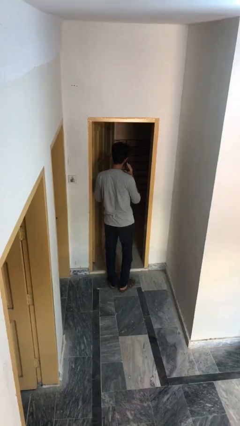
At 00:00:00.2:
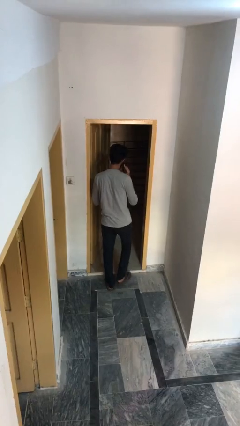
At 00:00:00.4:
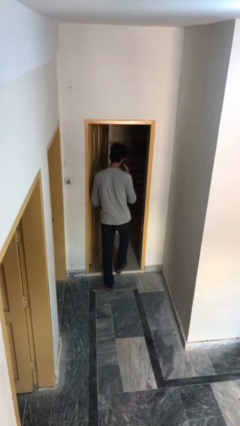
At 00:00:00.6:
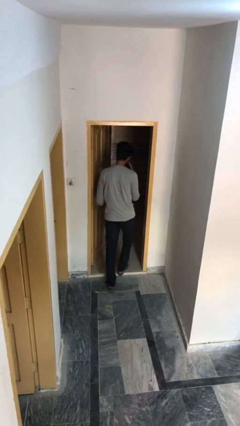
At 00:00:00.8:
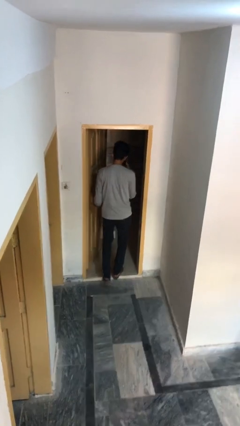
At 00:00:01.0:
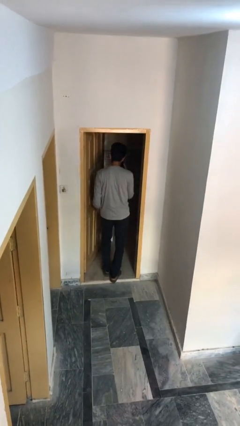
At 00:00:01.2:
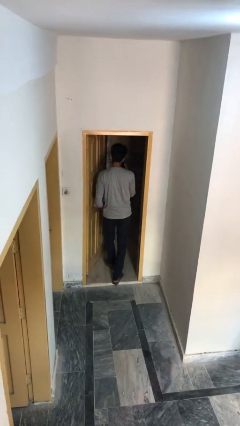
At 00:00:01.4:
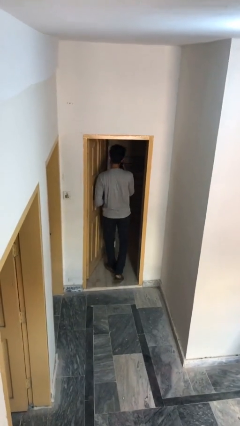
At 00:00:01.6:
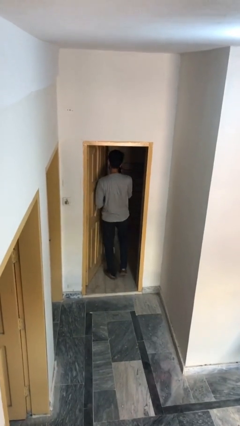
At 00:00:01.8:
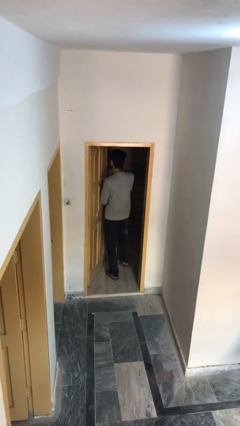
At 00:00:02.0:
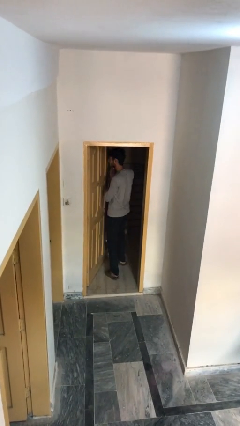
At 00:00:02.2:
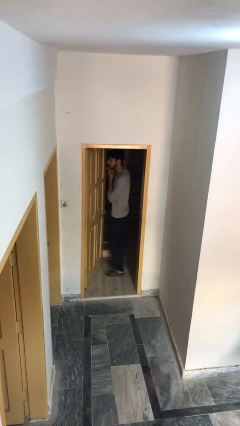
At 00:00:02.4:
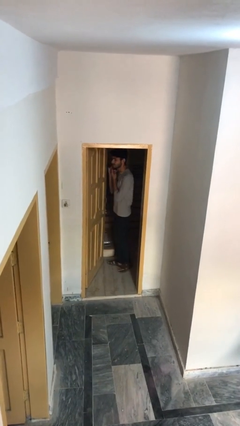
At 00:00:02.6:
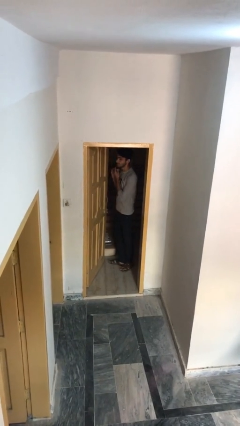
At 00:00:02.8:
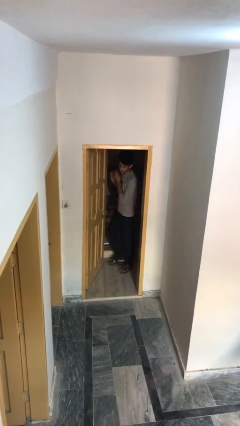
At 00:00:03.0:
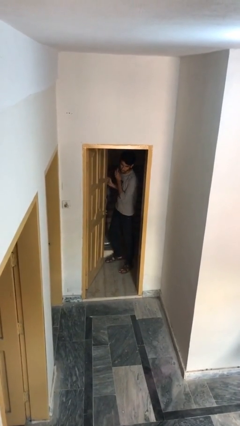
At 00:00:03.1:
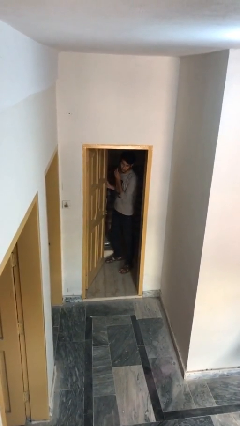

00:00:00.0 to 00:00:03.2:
person exits scene through structure

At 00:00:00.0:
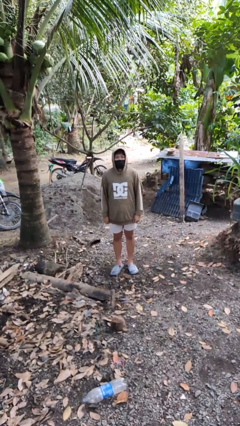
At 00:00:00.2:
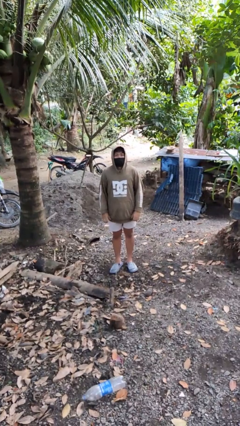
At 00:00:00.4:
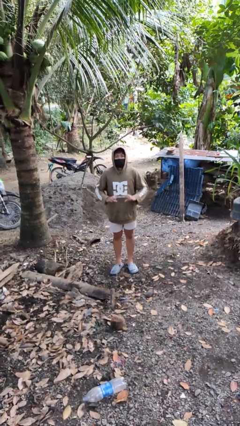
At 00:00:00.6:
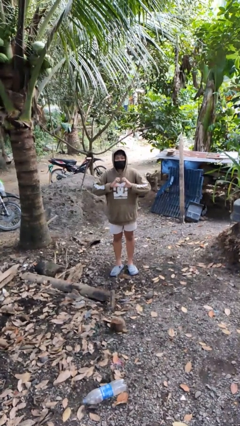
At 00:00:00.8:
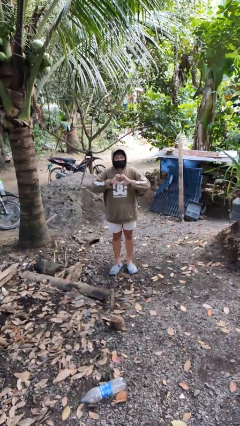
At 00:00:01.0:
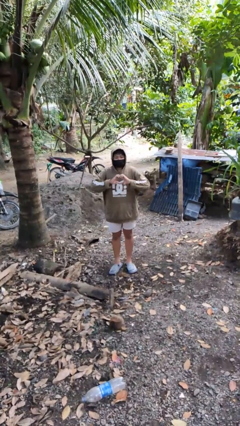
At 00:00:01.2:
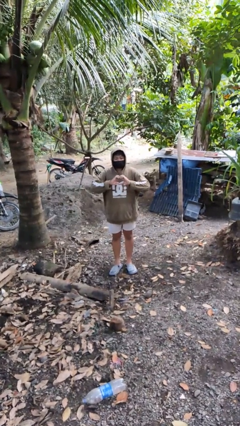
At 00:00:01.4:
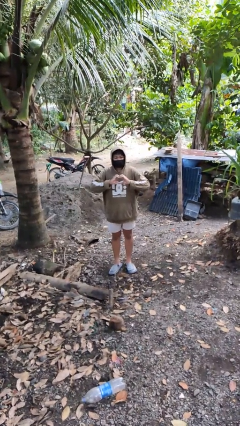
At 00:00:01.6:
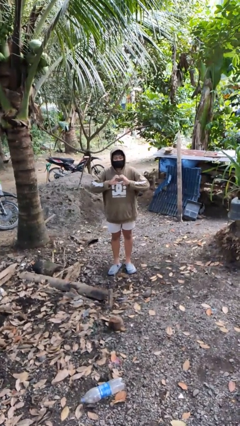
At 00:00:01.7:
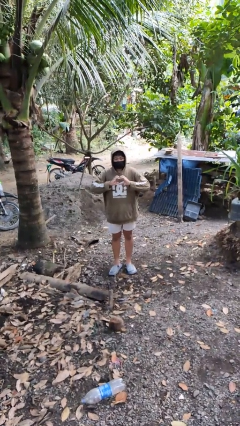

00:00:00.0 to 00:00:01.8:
person gestures heart

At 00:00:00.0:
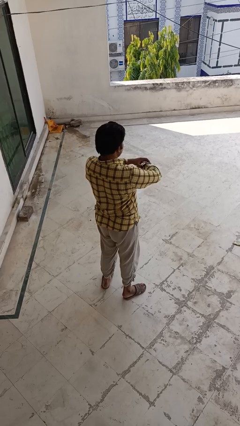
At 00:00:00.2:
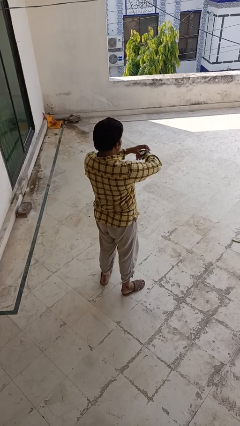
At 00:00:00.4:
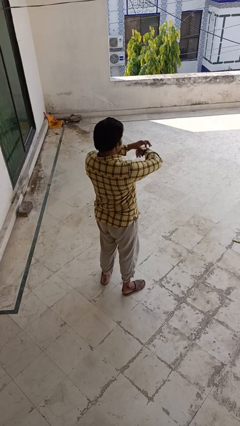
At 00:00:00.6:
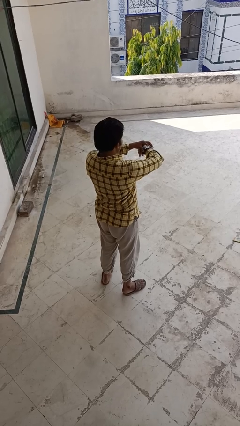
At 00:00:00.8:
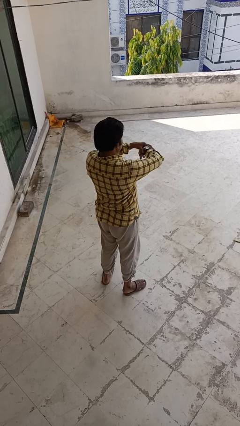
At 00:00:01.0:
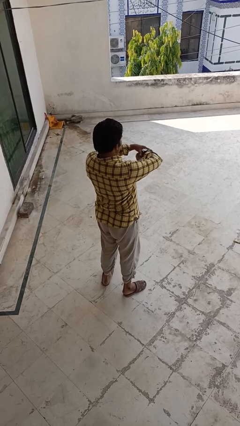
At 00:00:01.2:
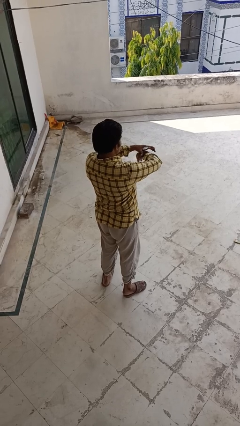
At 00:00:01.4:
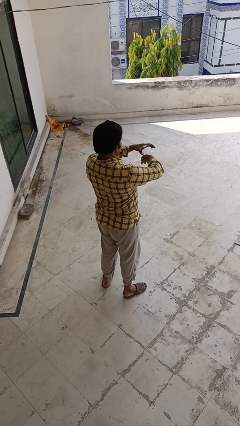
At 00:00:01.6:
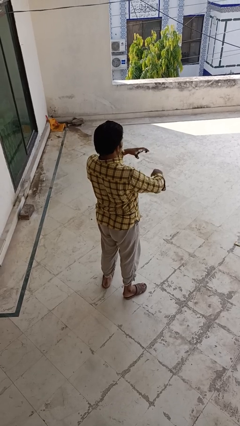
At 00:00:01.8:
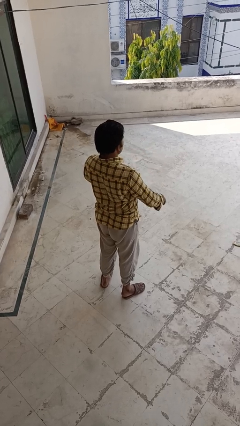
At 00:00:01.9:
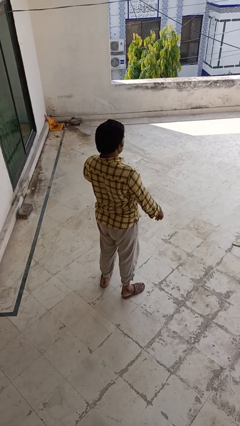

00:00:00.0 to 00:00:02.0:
person takes off wristwatch

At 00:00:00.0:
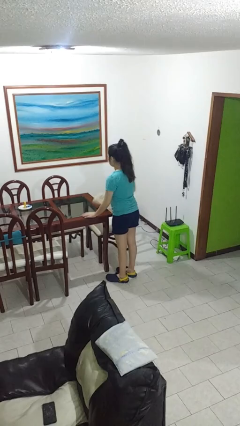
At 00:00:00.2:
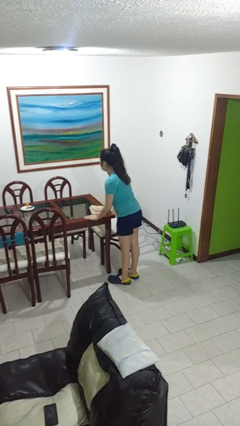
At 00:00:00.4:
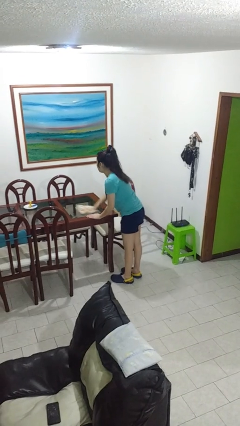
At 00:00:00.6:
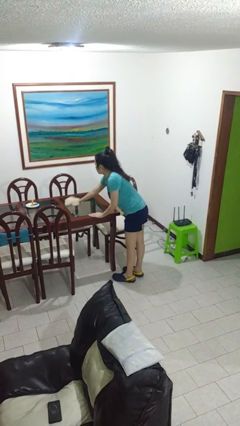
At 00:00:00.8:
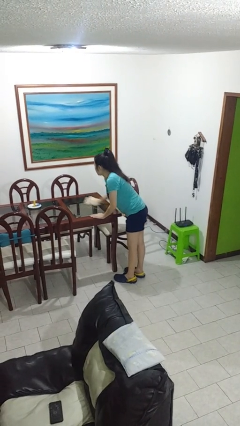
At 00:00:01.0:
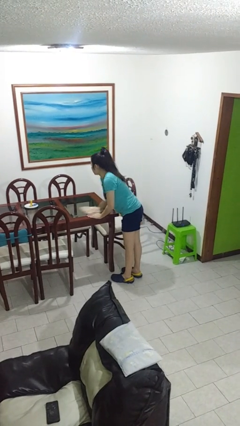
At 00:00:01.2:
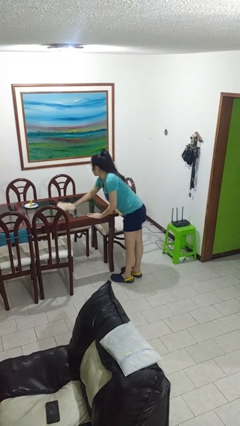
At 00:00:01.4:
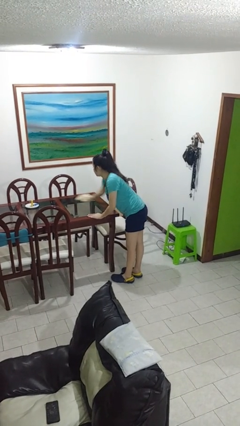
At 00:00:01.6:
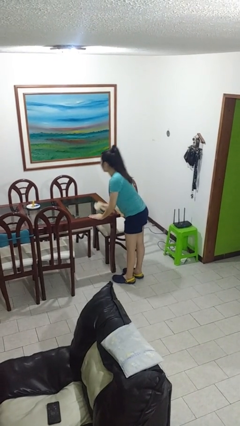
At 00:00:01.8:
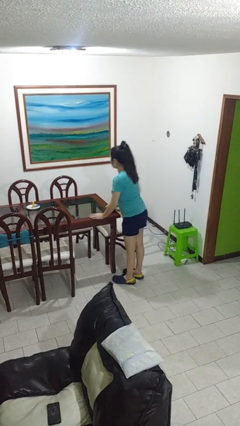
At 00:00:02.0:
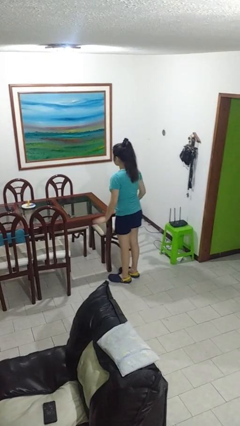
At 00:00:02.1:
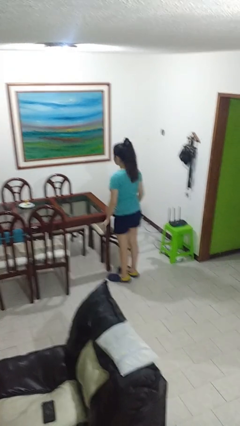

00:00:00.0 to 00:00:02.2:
person cleans table with rag

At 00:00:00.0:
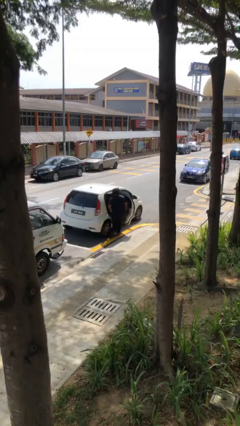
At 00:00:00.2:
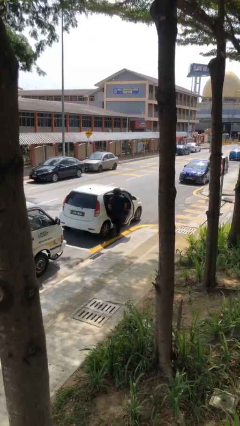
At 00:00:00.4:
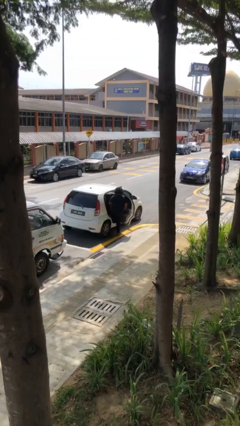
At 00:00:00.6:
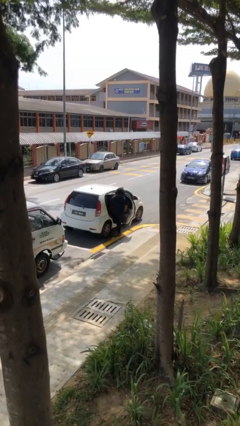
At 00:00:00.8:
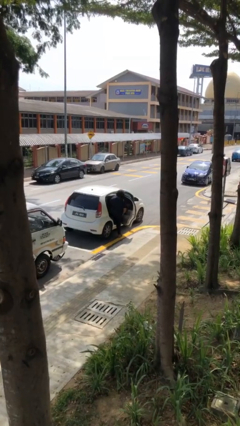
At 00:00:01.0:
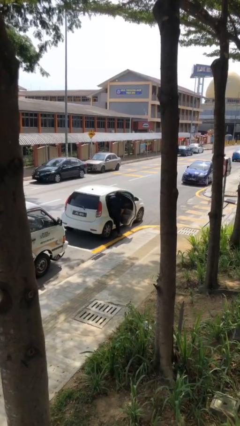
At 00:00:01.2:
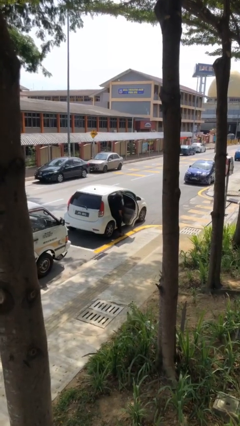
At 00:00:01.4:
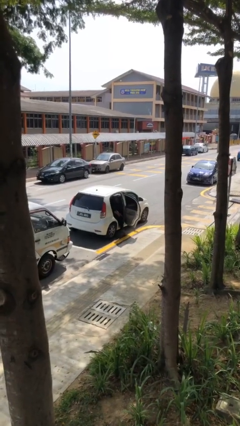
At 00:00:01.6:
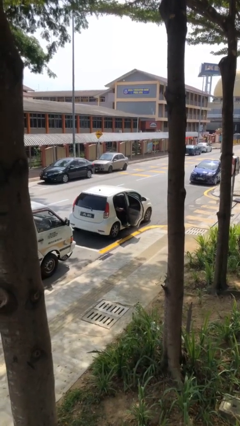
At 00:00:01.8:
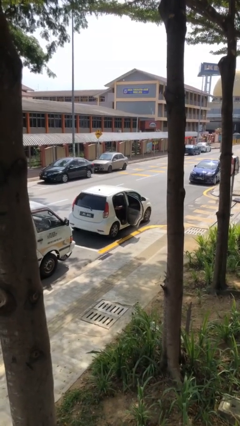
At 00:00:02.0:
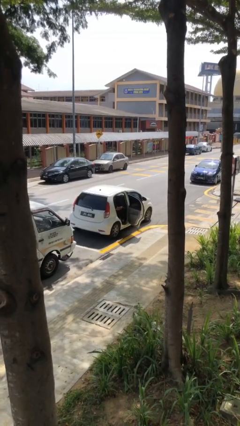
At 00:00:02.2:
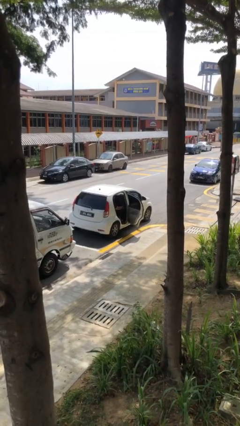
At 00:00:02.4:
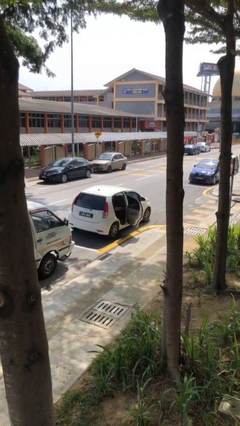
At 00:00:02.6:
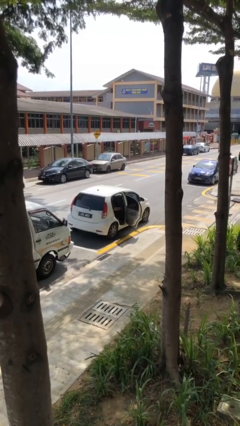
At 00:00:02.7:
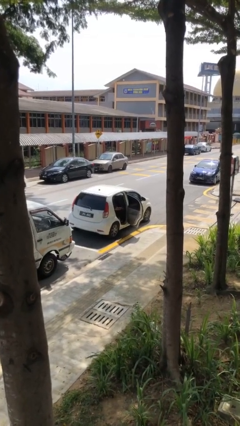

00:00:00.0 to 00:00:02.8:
person enters car

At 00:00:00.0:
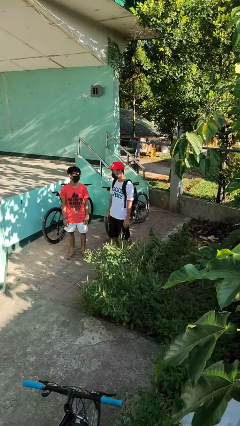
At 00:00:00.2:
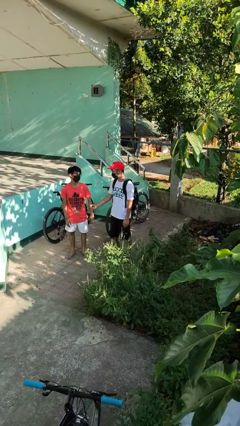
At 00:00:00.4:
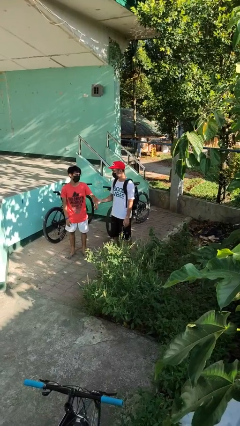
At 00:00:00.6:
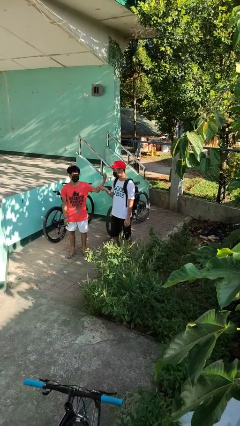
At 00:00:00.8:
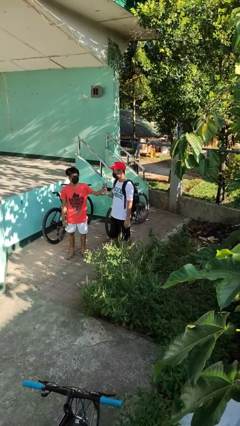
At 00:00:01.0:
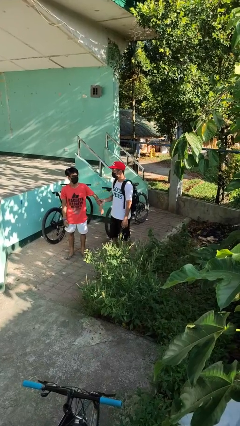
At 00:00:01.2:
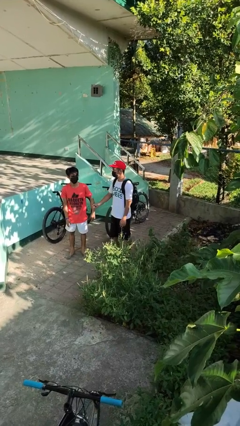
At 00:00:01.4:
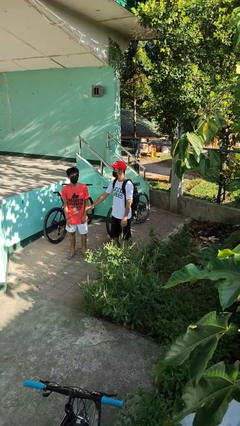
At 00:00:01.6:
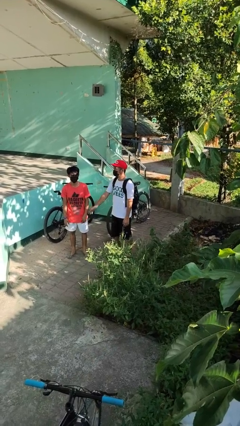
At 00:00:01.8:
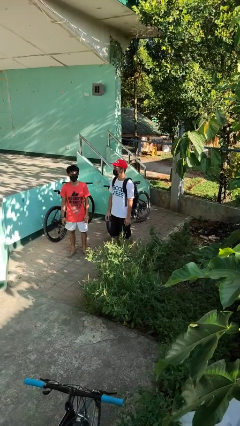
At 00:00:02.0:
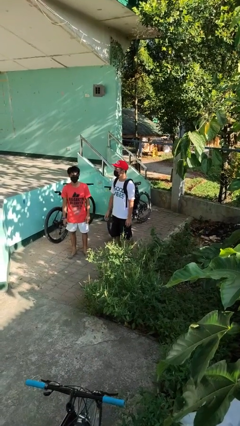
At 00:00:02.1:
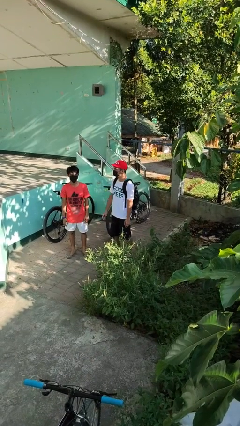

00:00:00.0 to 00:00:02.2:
person grabs person by forearm

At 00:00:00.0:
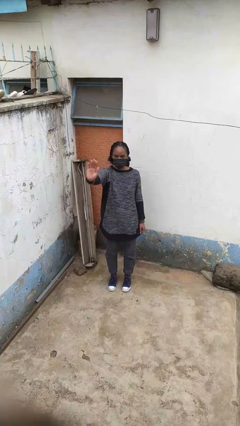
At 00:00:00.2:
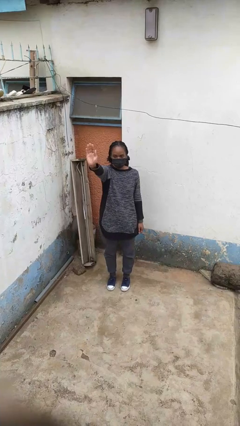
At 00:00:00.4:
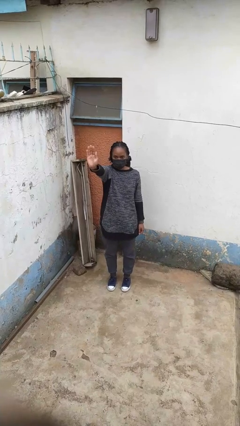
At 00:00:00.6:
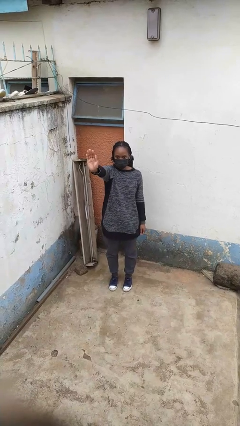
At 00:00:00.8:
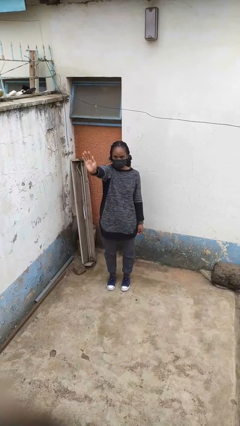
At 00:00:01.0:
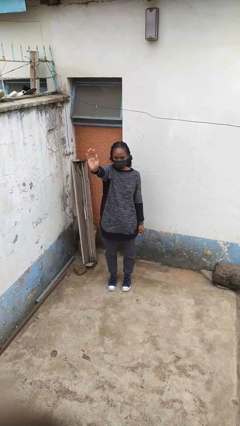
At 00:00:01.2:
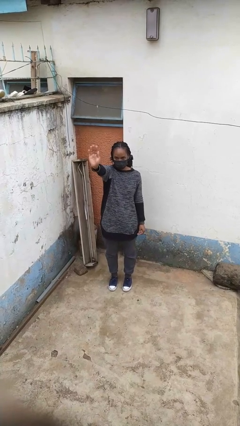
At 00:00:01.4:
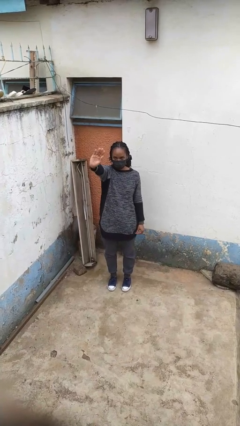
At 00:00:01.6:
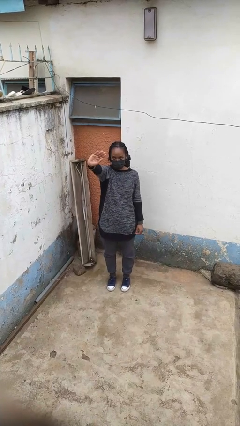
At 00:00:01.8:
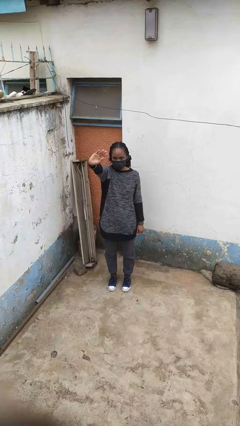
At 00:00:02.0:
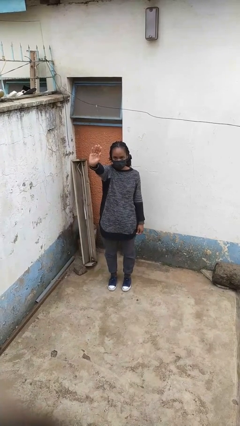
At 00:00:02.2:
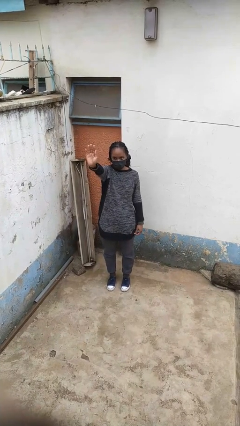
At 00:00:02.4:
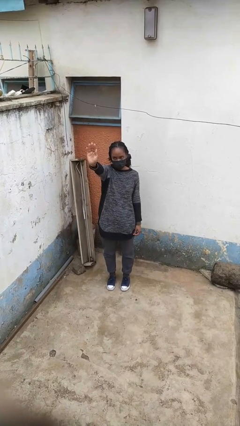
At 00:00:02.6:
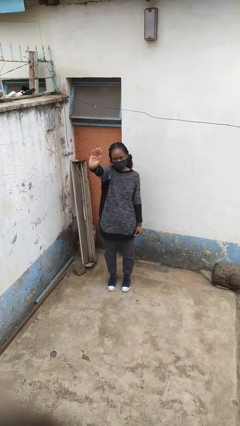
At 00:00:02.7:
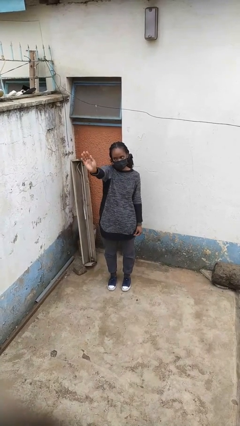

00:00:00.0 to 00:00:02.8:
person waves at person
